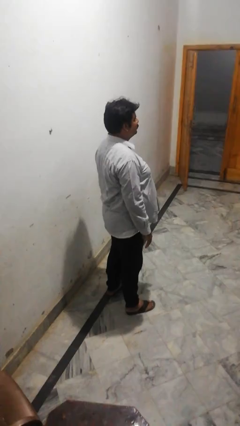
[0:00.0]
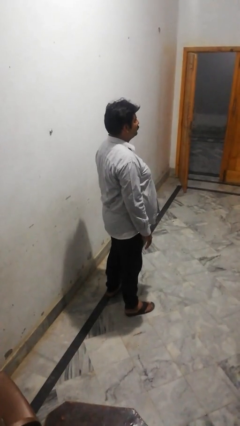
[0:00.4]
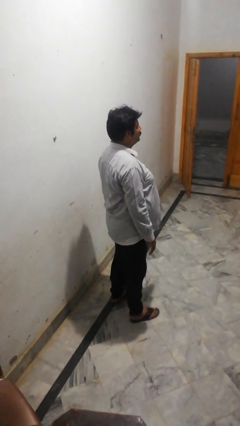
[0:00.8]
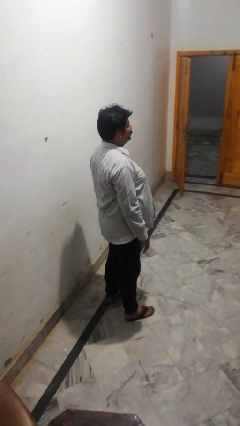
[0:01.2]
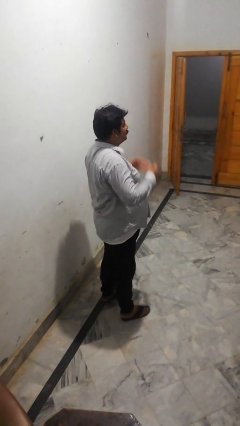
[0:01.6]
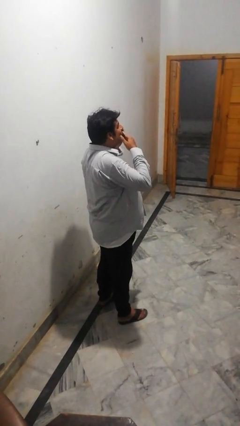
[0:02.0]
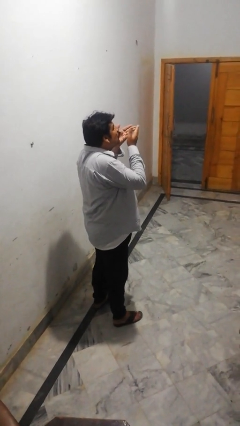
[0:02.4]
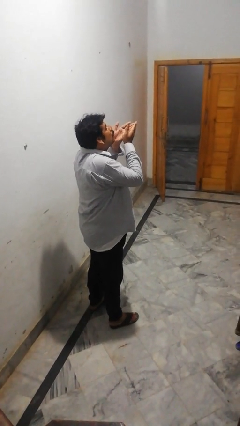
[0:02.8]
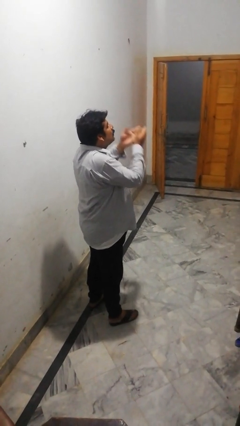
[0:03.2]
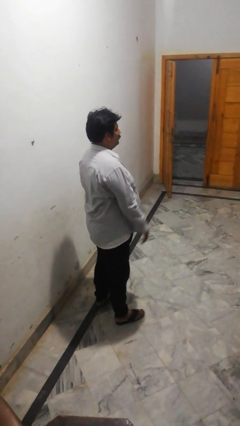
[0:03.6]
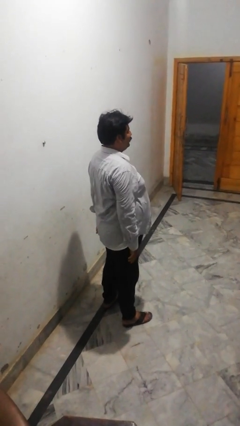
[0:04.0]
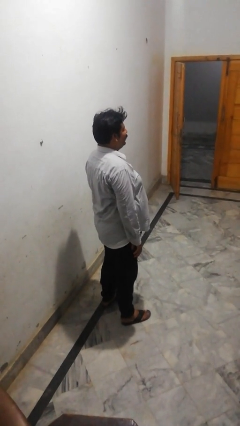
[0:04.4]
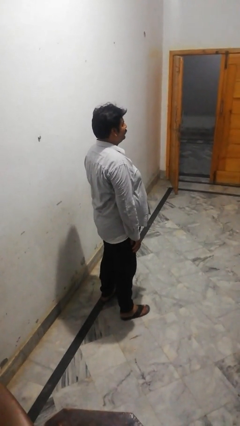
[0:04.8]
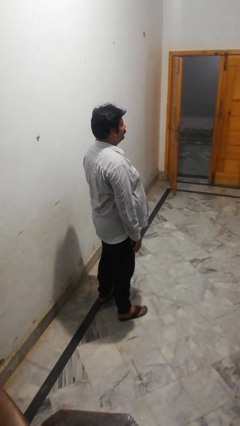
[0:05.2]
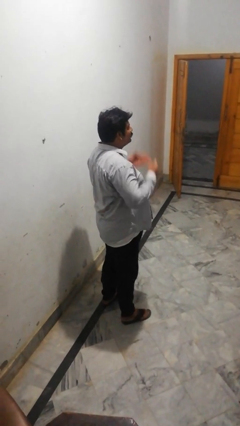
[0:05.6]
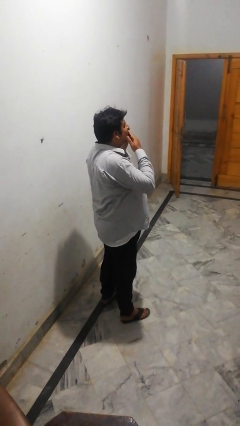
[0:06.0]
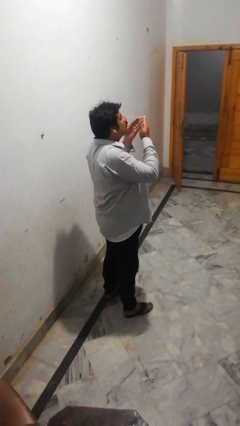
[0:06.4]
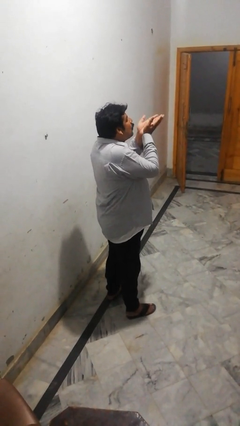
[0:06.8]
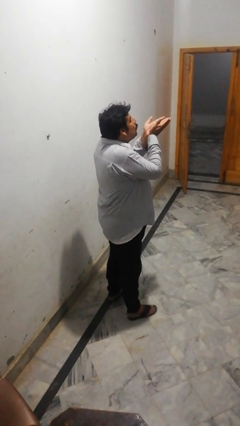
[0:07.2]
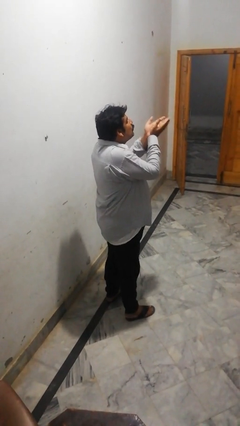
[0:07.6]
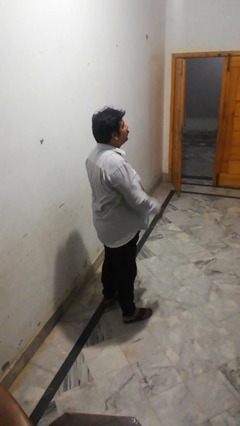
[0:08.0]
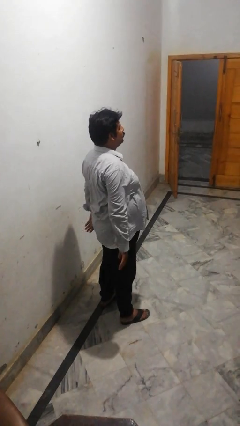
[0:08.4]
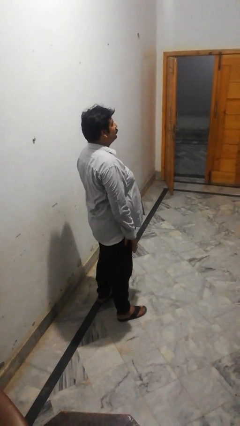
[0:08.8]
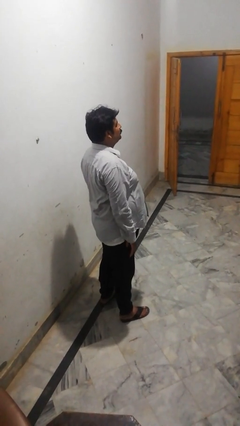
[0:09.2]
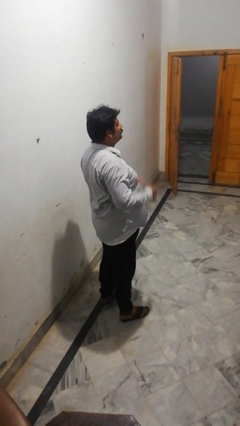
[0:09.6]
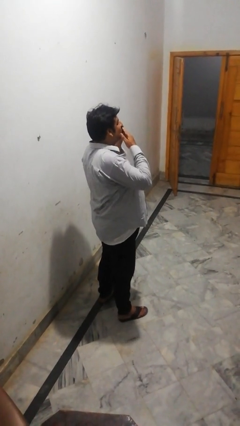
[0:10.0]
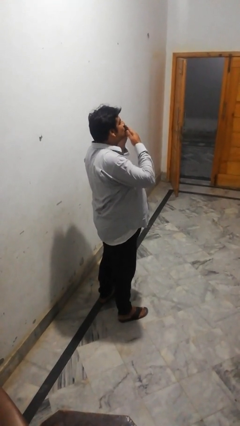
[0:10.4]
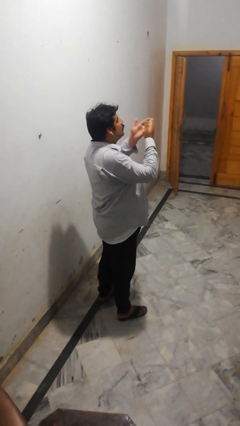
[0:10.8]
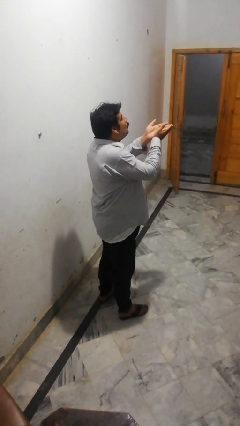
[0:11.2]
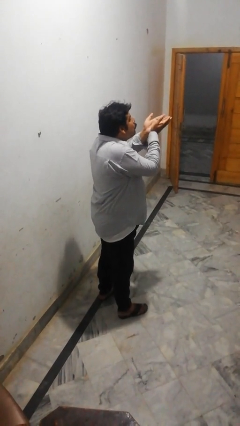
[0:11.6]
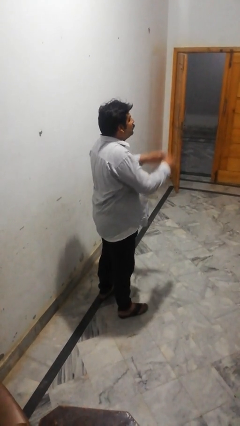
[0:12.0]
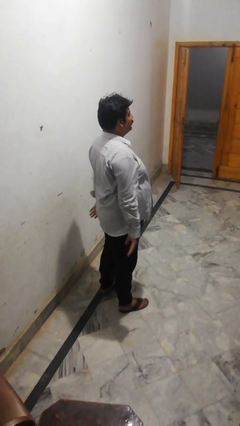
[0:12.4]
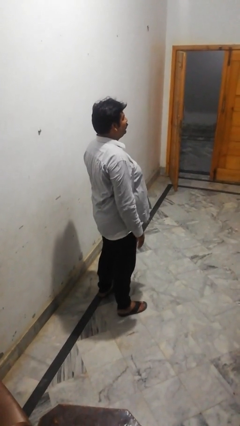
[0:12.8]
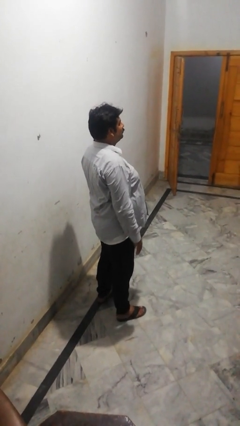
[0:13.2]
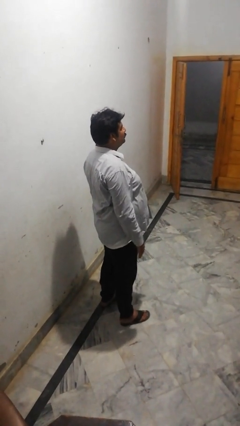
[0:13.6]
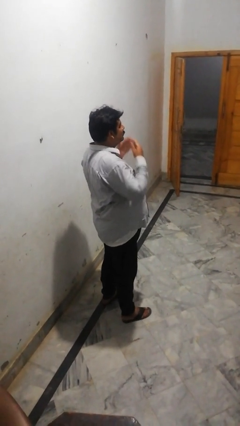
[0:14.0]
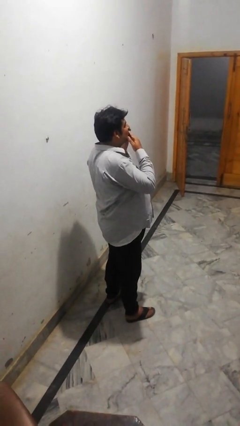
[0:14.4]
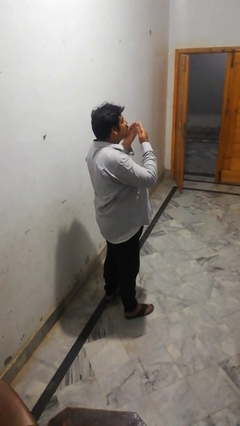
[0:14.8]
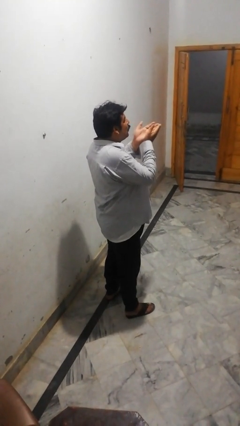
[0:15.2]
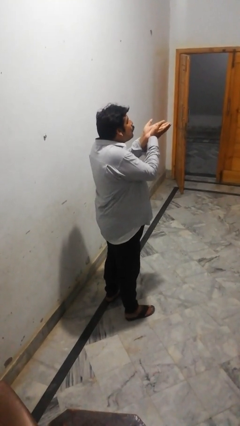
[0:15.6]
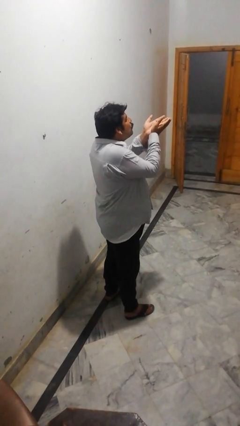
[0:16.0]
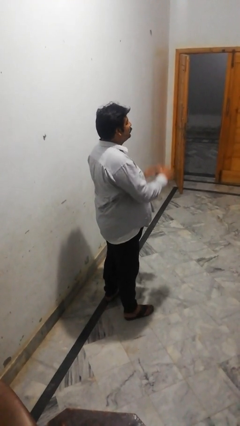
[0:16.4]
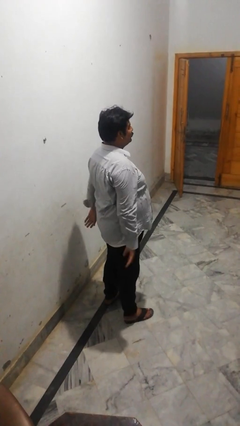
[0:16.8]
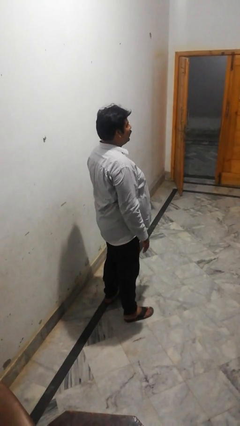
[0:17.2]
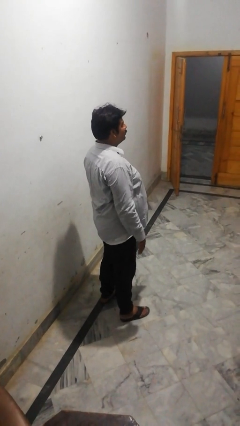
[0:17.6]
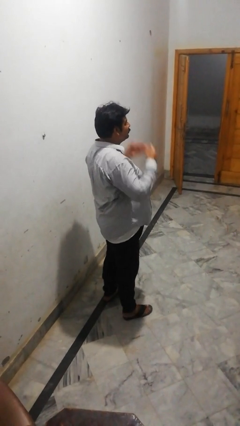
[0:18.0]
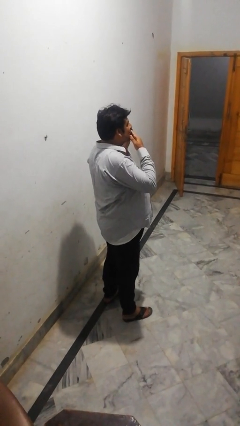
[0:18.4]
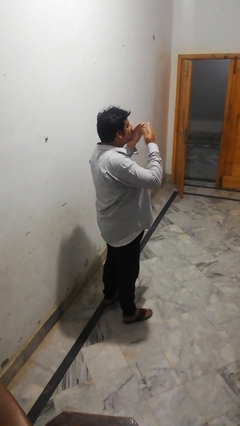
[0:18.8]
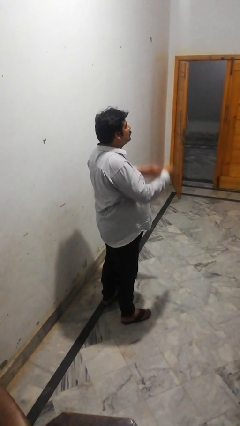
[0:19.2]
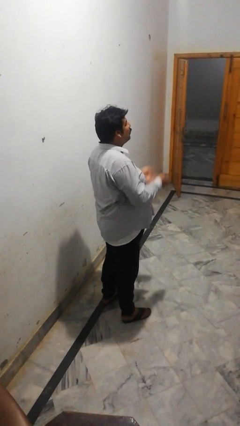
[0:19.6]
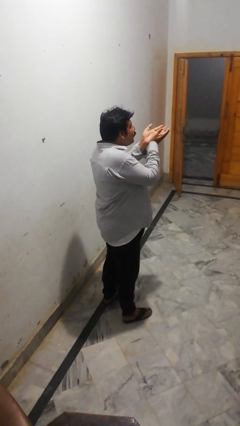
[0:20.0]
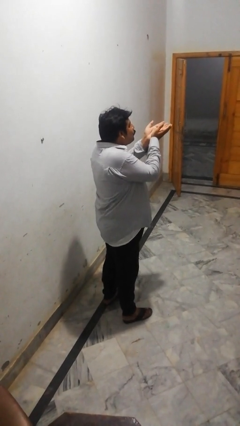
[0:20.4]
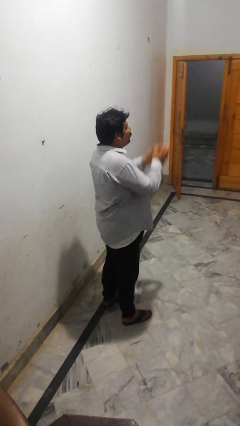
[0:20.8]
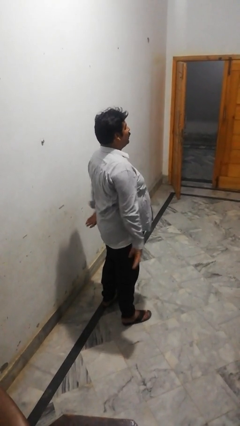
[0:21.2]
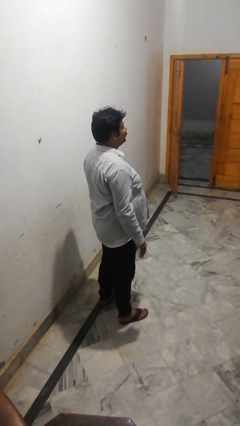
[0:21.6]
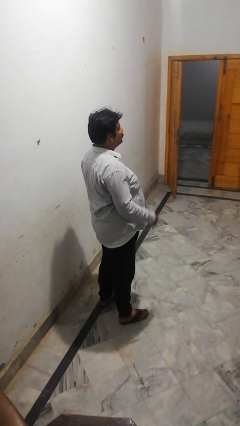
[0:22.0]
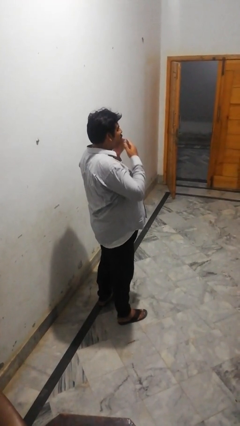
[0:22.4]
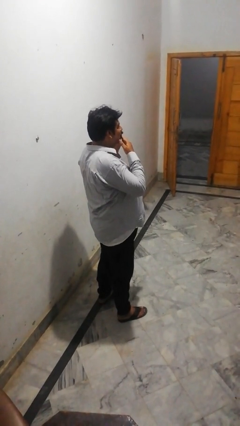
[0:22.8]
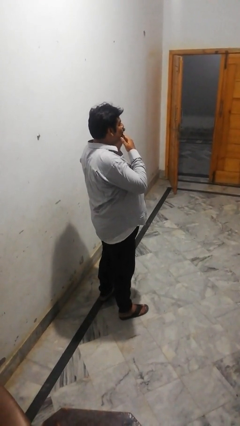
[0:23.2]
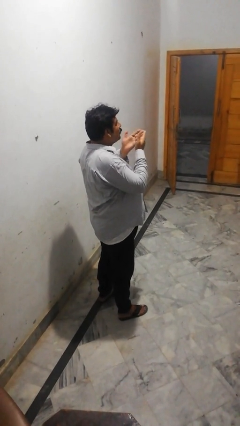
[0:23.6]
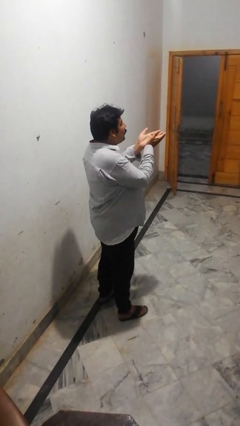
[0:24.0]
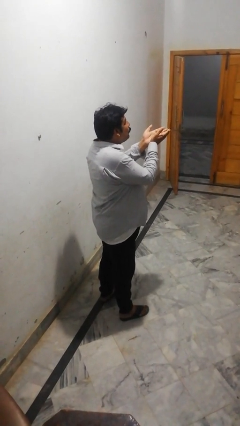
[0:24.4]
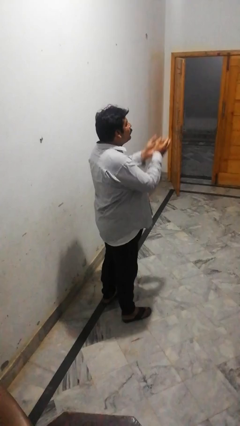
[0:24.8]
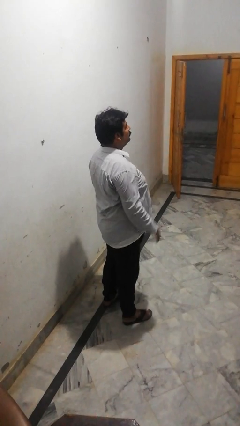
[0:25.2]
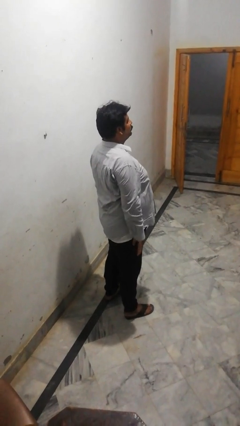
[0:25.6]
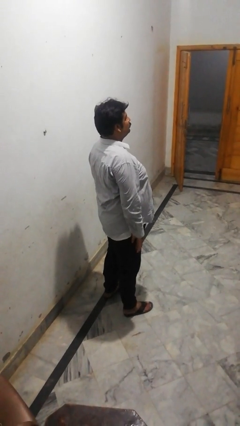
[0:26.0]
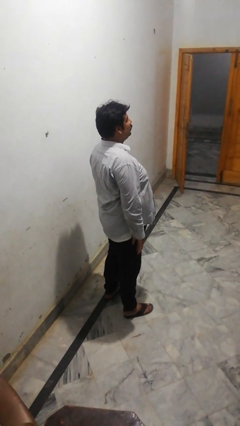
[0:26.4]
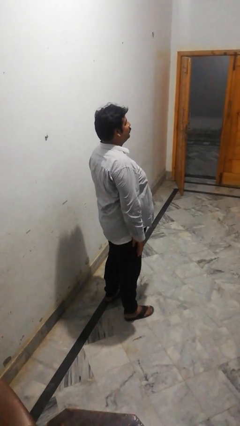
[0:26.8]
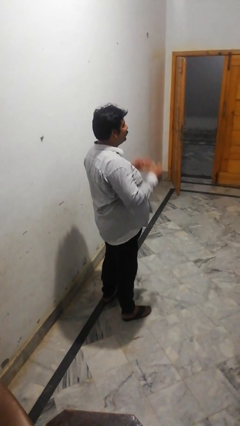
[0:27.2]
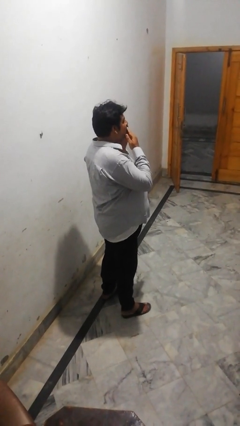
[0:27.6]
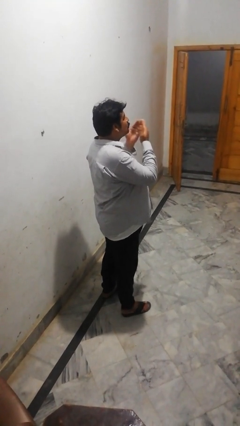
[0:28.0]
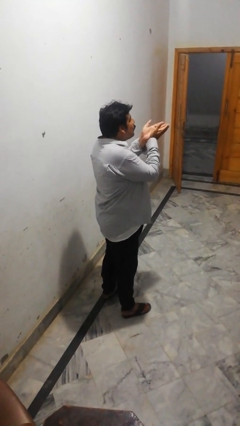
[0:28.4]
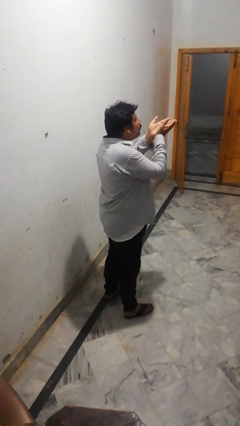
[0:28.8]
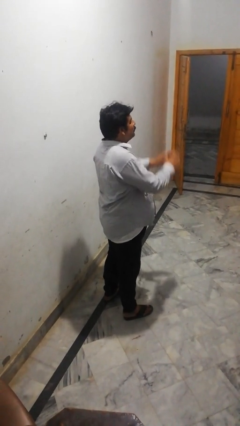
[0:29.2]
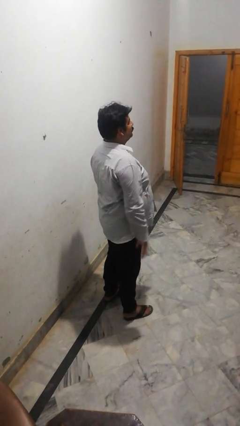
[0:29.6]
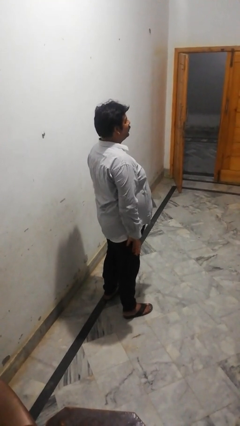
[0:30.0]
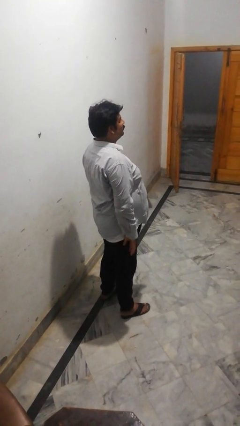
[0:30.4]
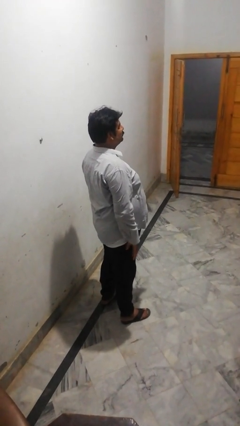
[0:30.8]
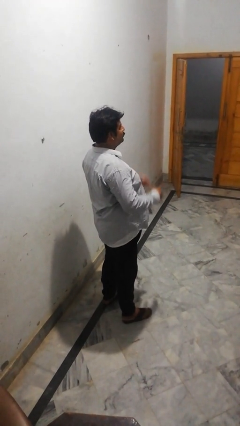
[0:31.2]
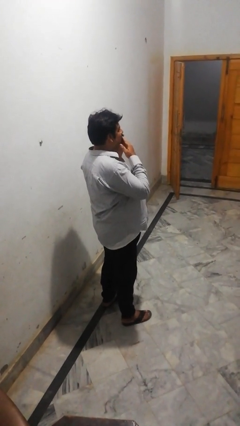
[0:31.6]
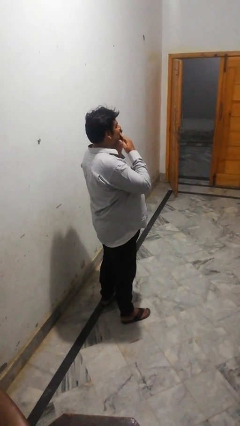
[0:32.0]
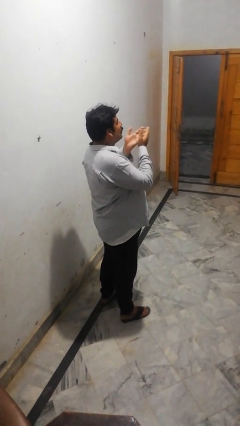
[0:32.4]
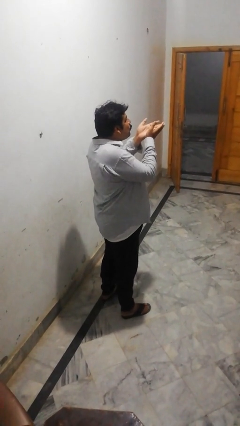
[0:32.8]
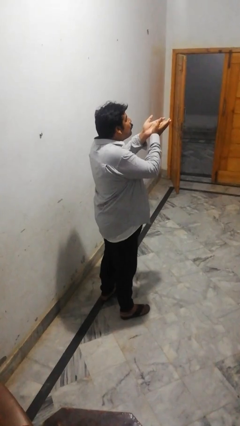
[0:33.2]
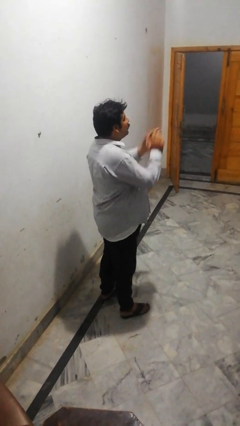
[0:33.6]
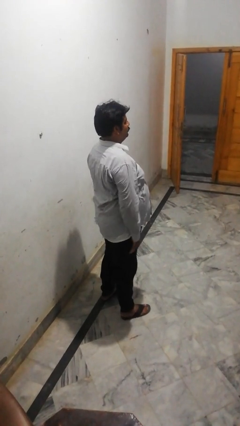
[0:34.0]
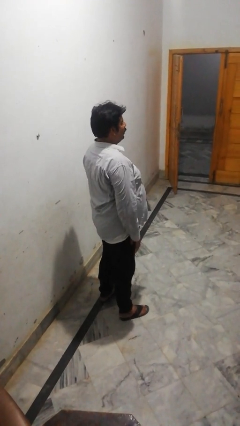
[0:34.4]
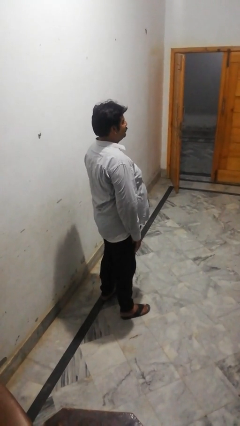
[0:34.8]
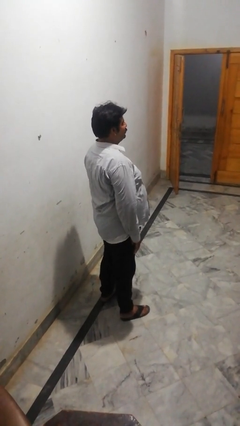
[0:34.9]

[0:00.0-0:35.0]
person gestures blow kiss

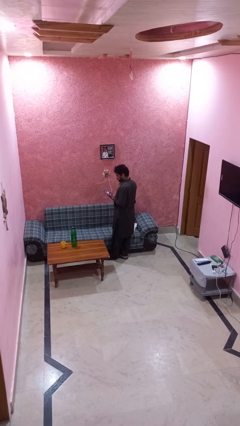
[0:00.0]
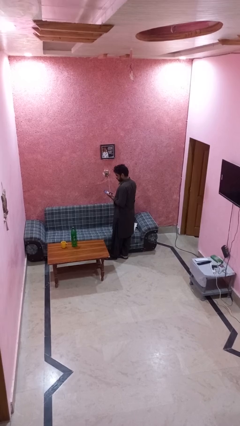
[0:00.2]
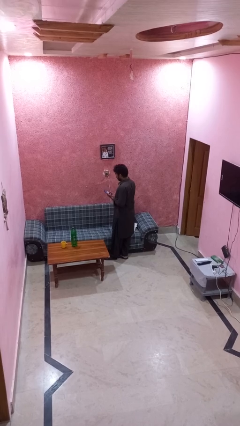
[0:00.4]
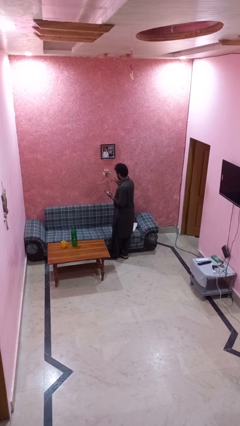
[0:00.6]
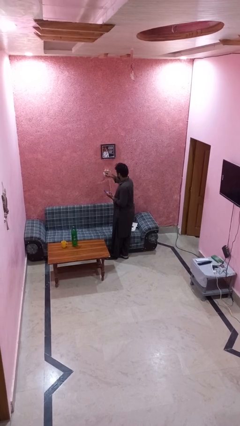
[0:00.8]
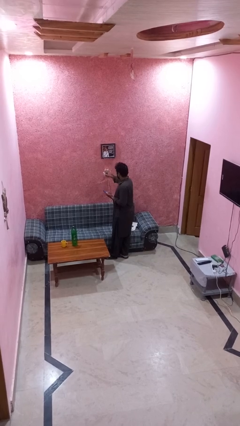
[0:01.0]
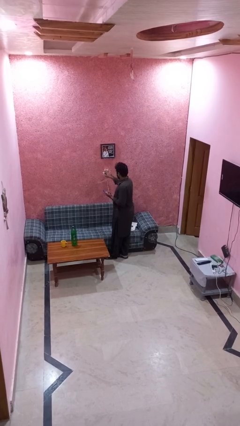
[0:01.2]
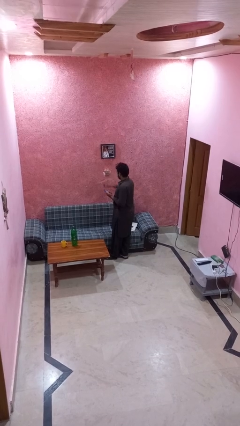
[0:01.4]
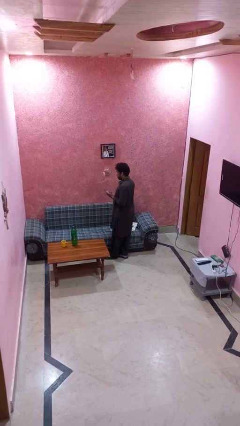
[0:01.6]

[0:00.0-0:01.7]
person unplugs from electrical socket
